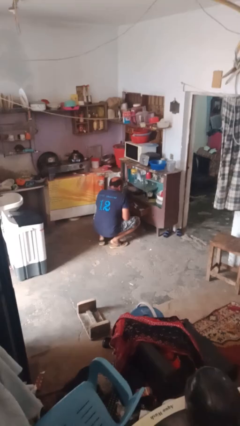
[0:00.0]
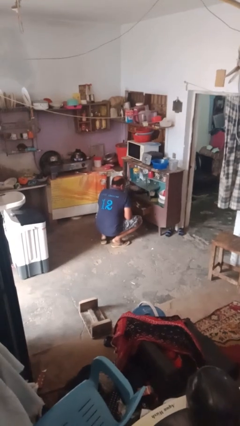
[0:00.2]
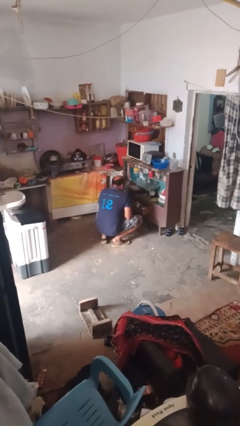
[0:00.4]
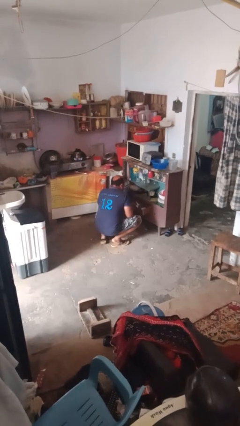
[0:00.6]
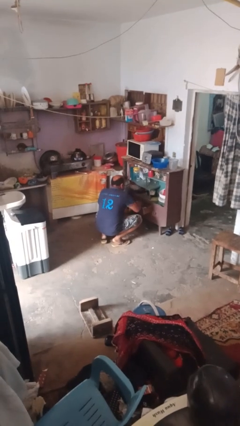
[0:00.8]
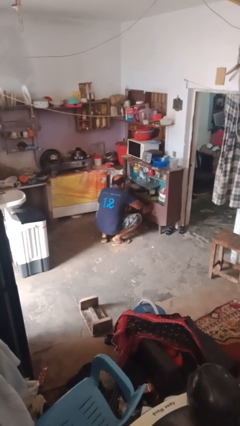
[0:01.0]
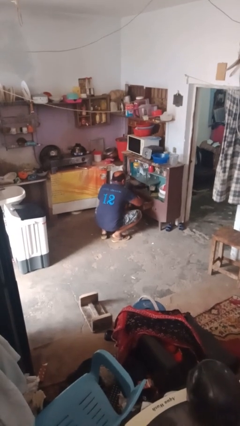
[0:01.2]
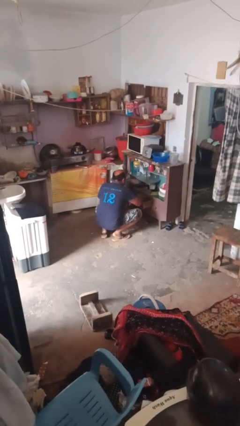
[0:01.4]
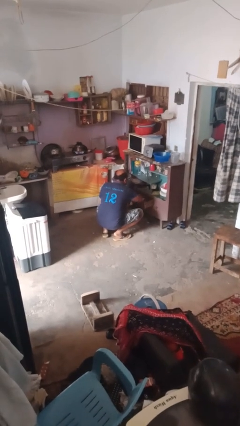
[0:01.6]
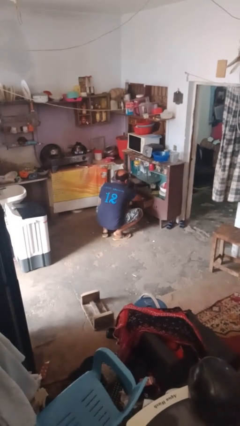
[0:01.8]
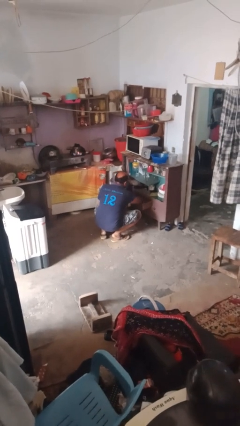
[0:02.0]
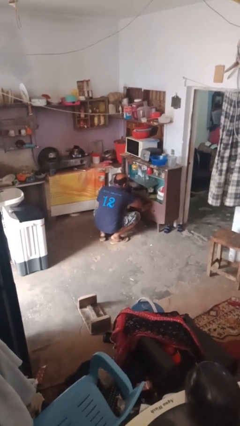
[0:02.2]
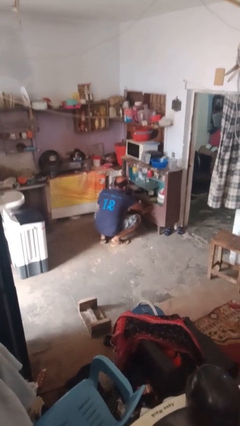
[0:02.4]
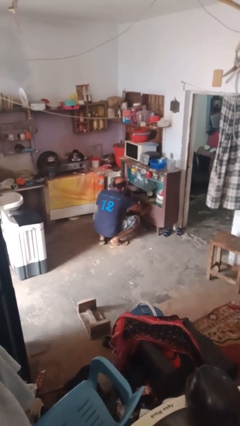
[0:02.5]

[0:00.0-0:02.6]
person searches in kitchen drawer

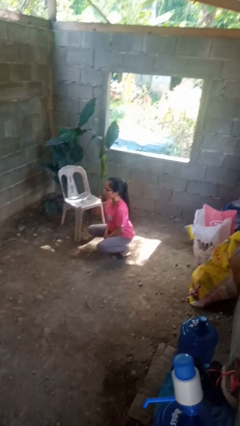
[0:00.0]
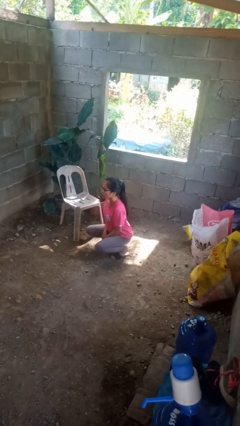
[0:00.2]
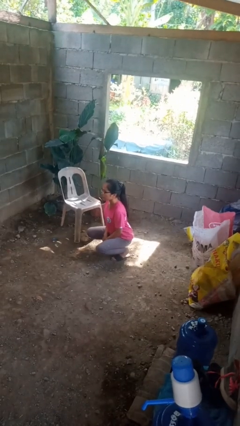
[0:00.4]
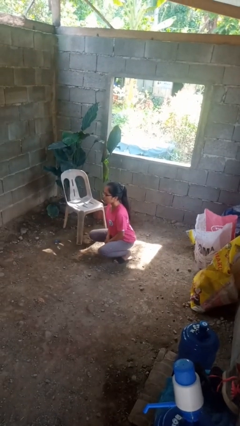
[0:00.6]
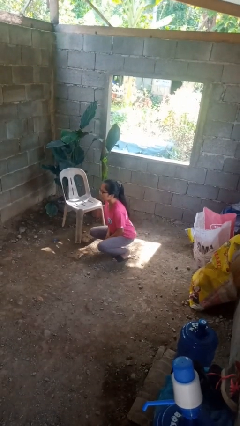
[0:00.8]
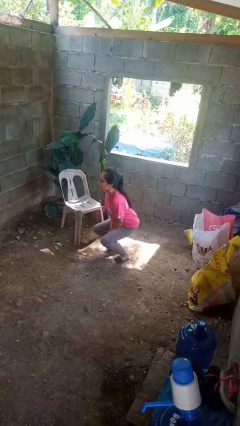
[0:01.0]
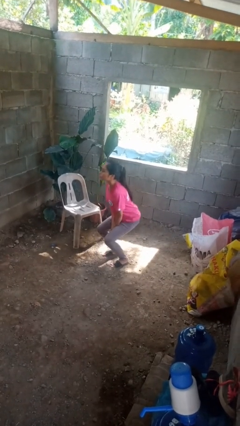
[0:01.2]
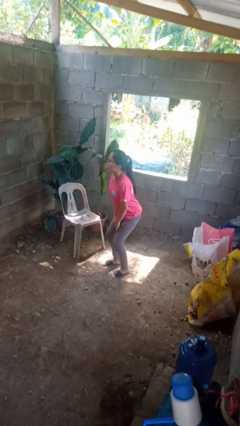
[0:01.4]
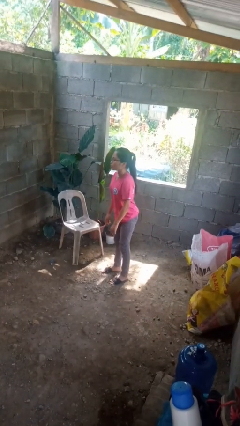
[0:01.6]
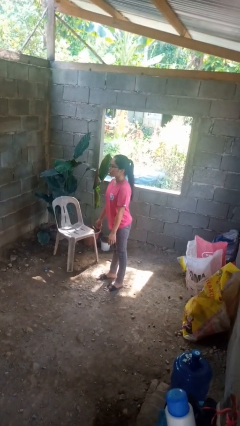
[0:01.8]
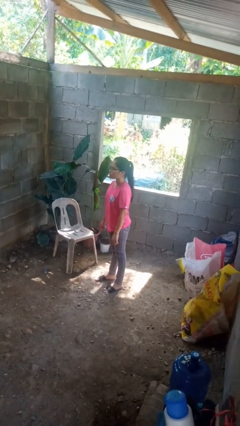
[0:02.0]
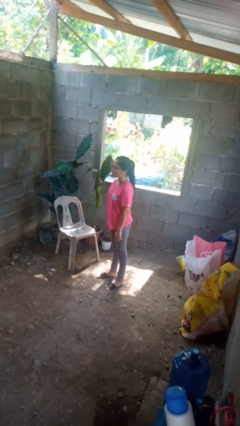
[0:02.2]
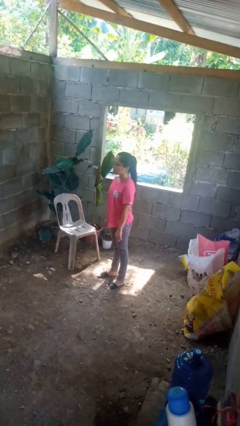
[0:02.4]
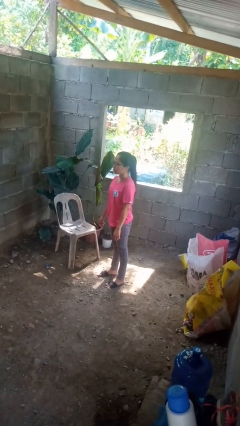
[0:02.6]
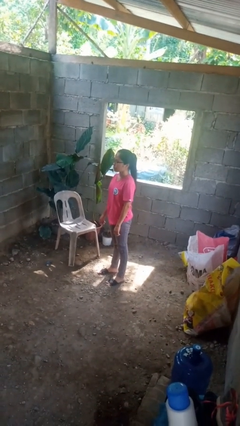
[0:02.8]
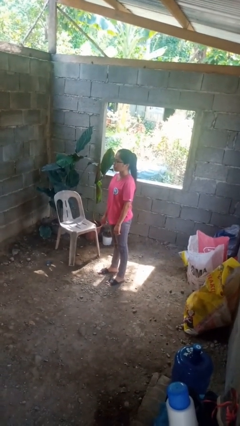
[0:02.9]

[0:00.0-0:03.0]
person stands up

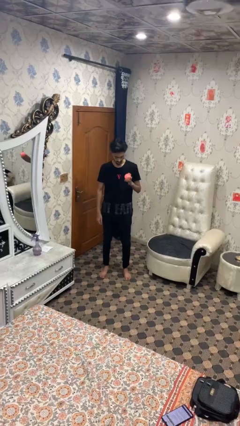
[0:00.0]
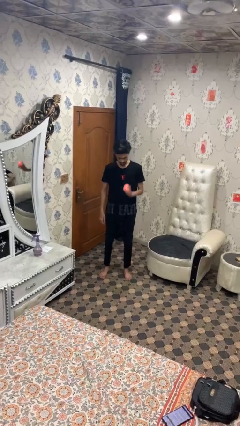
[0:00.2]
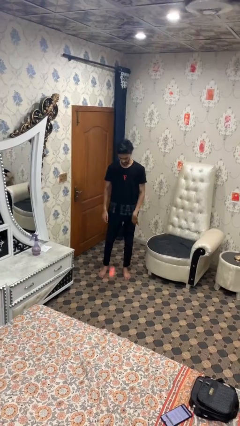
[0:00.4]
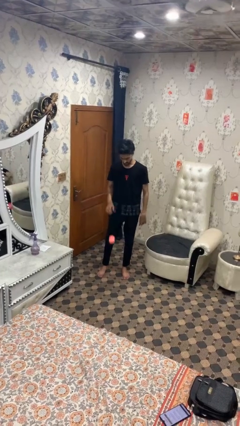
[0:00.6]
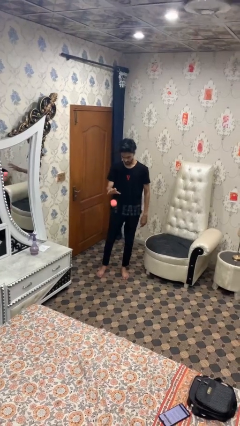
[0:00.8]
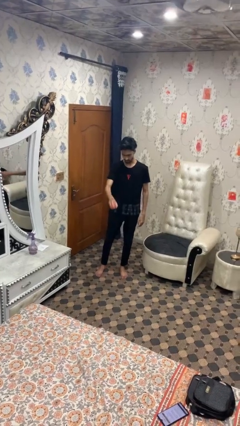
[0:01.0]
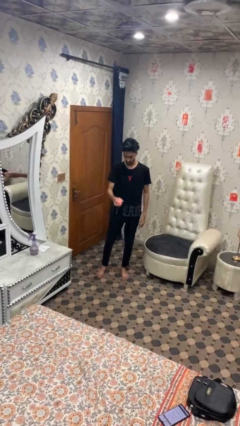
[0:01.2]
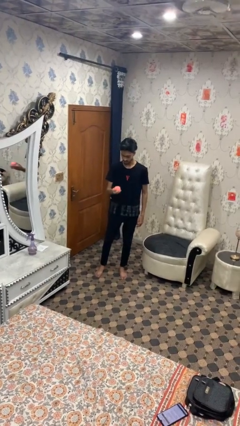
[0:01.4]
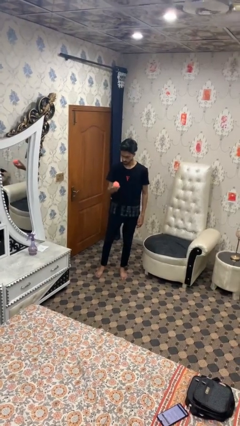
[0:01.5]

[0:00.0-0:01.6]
person bounces ball on floor

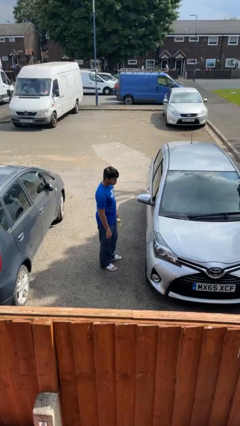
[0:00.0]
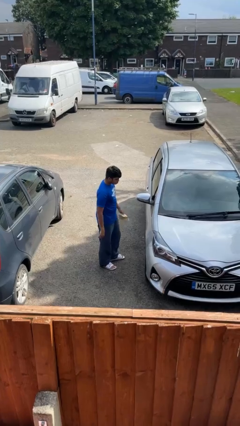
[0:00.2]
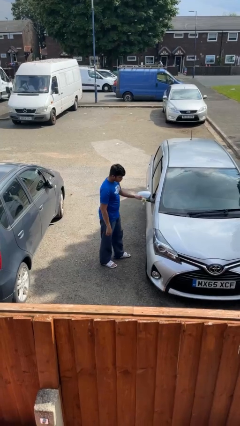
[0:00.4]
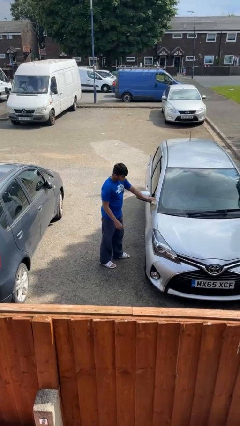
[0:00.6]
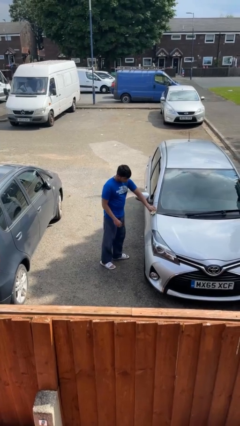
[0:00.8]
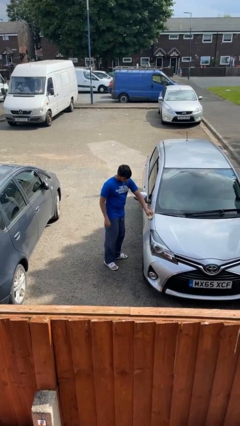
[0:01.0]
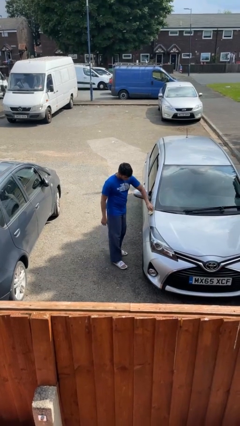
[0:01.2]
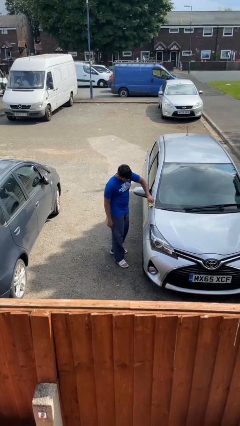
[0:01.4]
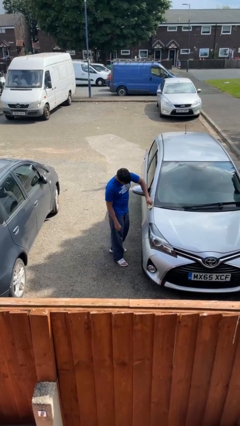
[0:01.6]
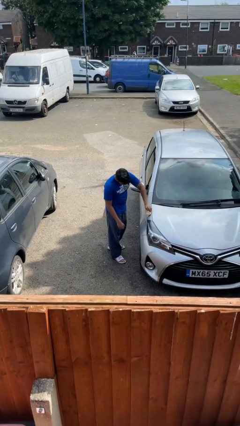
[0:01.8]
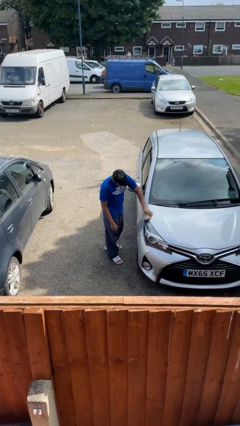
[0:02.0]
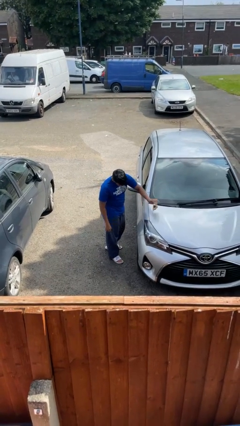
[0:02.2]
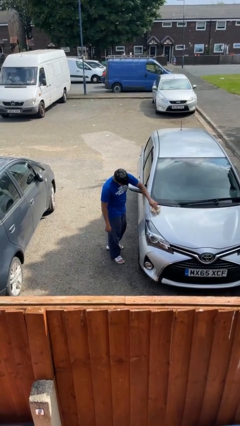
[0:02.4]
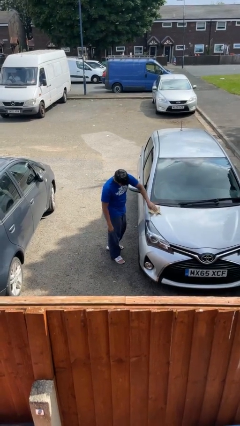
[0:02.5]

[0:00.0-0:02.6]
person polishes car with rag

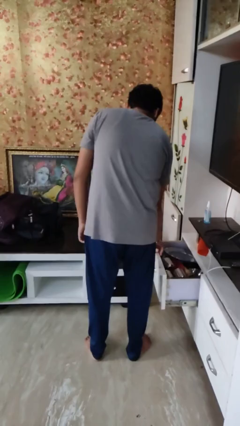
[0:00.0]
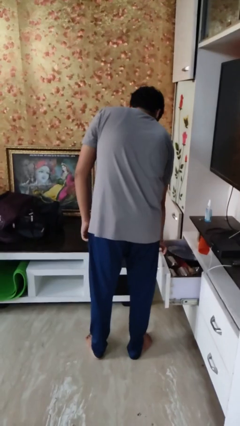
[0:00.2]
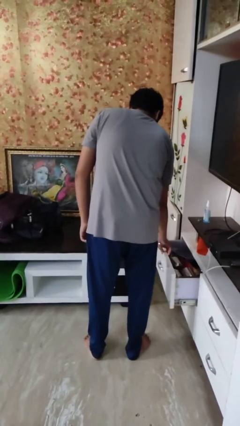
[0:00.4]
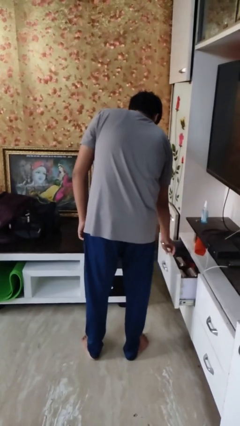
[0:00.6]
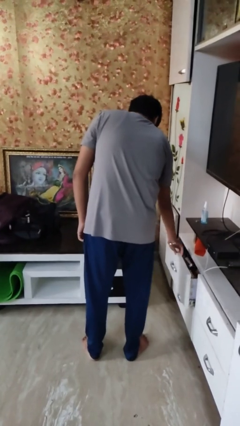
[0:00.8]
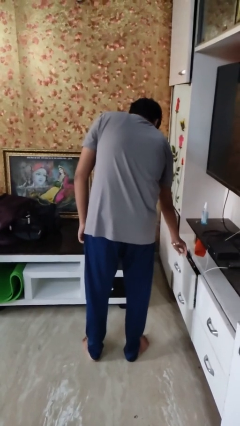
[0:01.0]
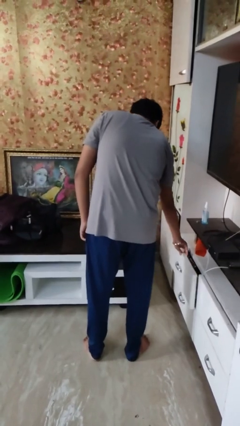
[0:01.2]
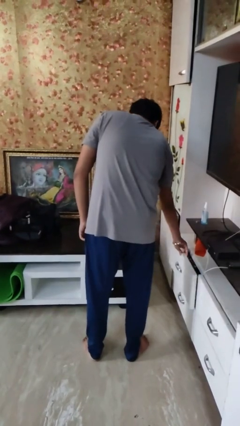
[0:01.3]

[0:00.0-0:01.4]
person closes kitchen drawer

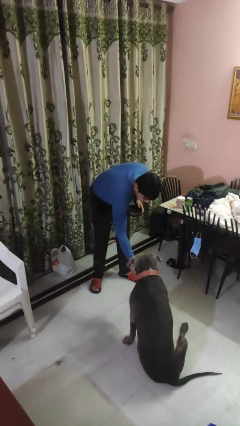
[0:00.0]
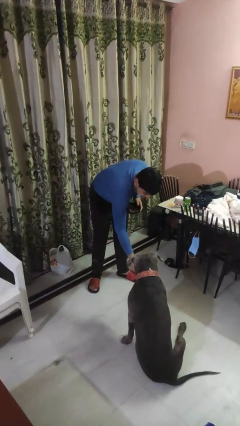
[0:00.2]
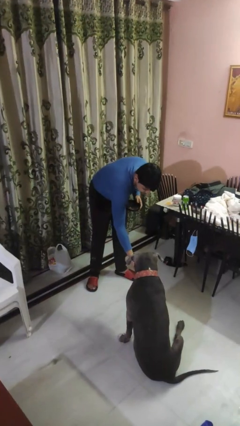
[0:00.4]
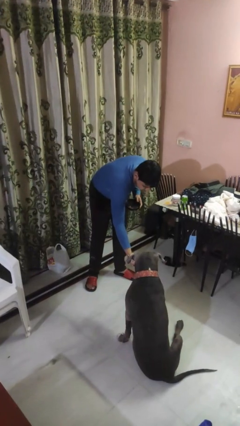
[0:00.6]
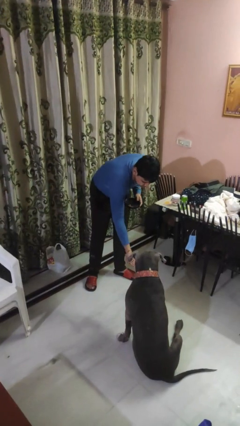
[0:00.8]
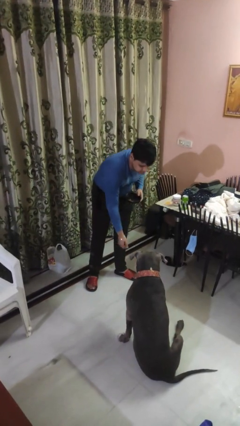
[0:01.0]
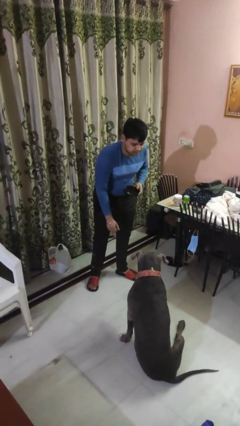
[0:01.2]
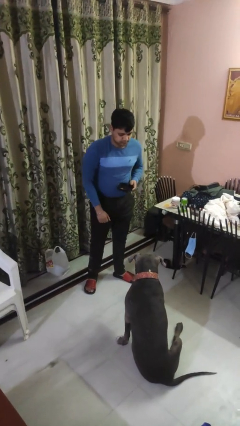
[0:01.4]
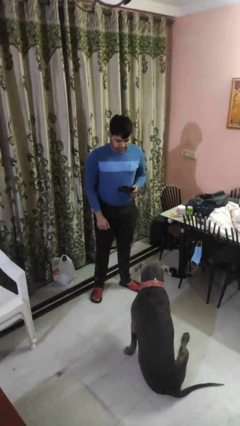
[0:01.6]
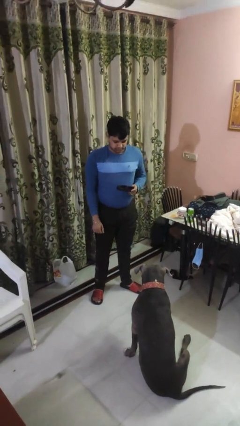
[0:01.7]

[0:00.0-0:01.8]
person feeds dog

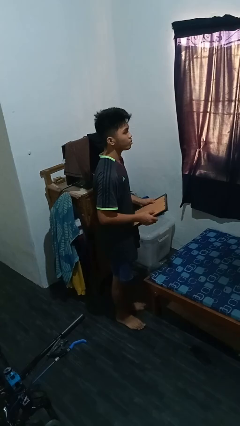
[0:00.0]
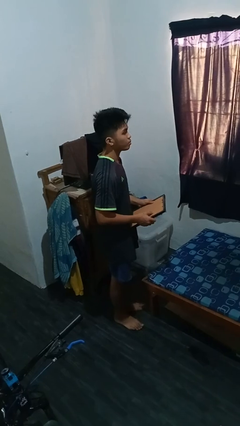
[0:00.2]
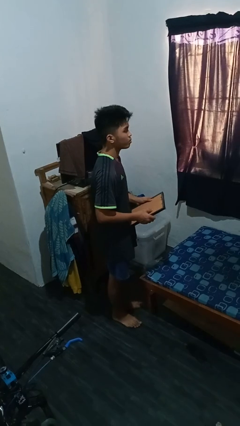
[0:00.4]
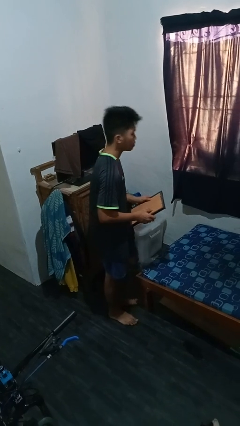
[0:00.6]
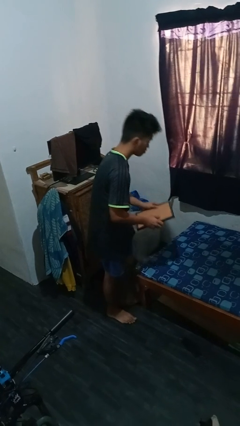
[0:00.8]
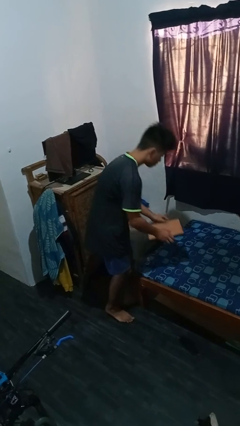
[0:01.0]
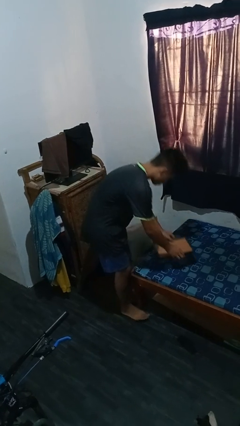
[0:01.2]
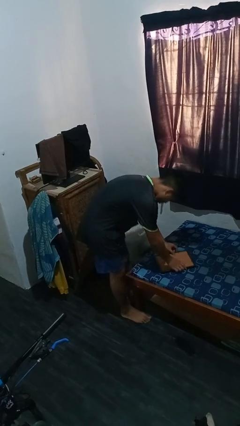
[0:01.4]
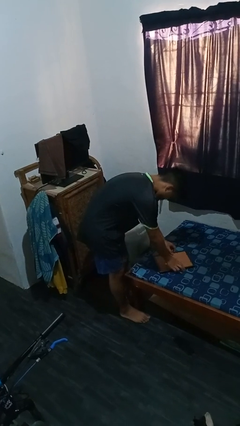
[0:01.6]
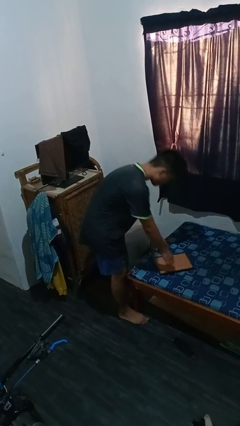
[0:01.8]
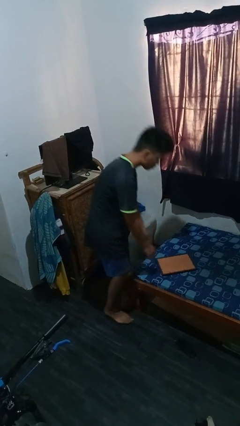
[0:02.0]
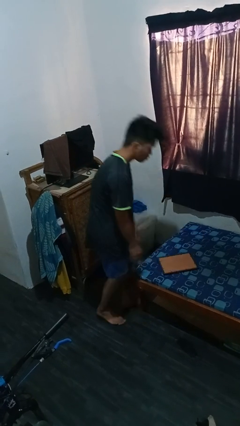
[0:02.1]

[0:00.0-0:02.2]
person puts down object on bed

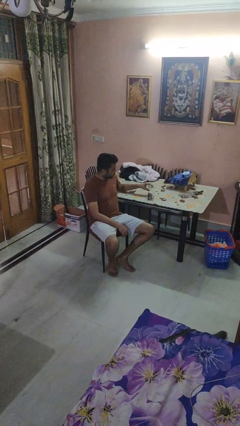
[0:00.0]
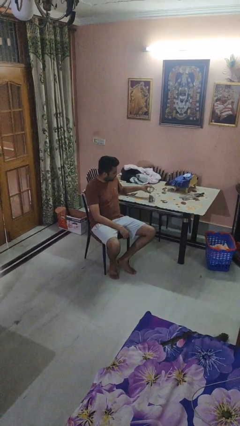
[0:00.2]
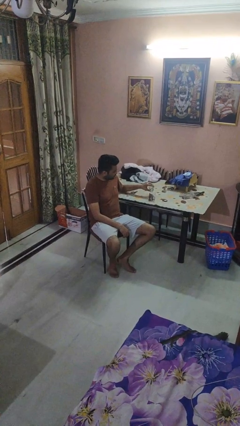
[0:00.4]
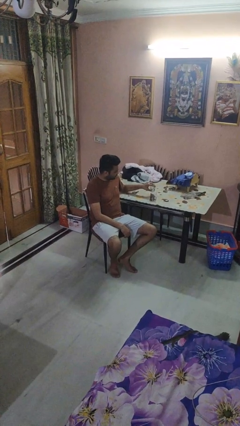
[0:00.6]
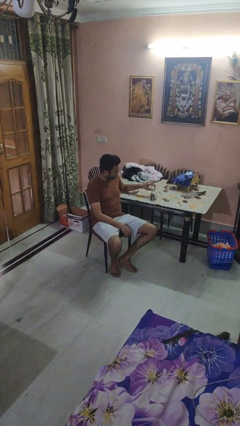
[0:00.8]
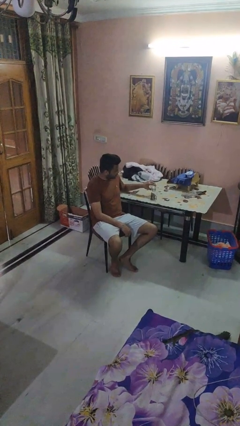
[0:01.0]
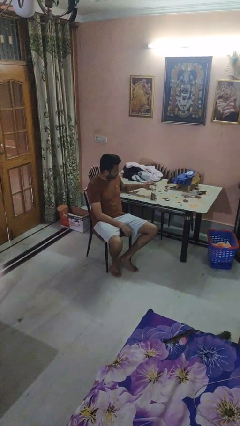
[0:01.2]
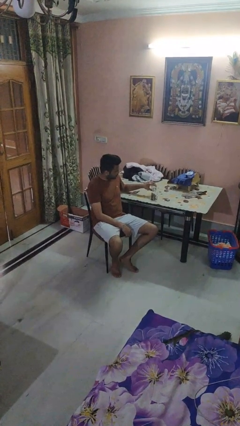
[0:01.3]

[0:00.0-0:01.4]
person pours liquid into cup

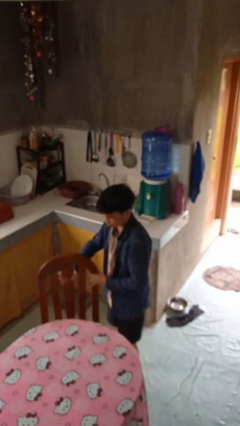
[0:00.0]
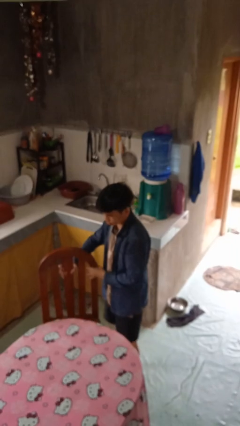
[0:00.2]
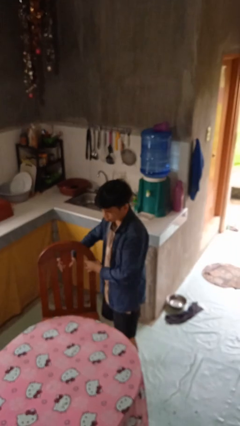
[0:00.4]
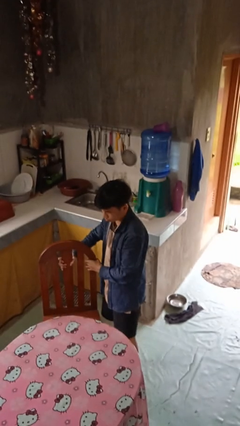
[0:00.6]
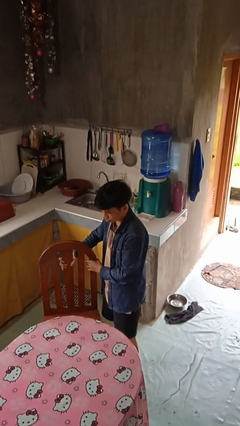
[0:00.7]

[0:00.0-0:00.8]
person pulls out chair
